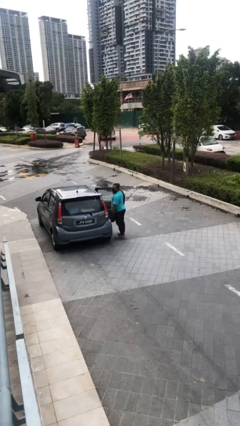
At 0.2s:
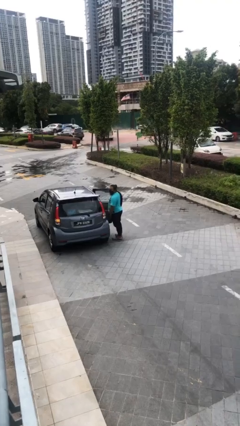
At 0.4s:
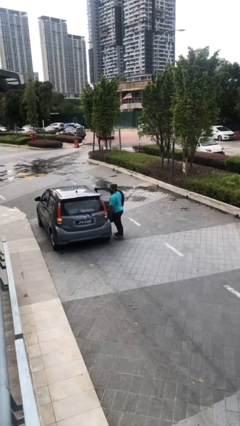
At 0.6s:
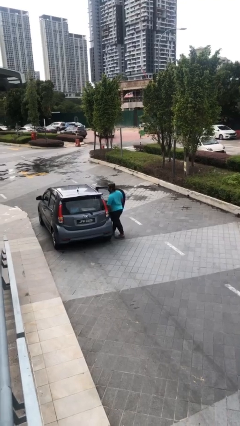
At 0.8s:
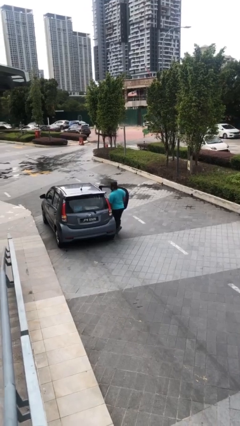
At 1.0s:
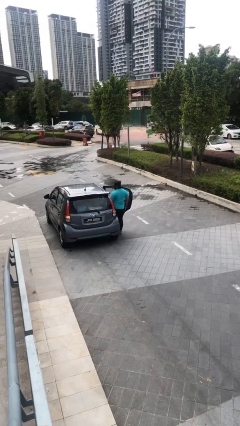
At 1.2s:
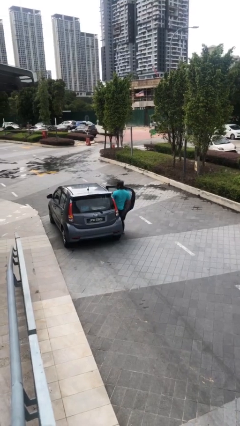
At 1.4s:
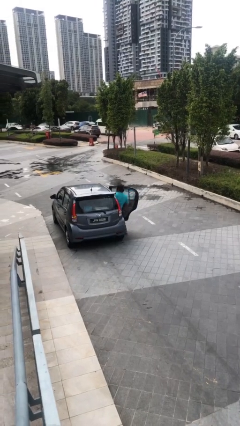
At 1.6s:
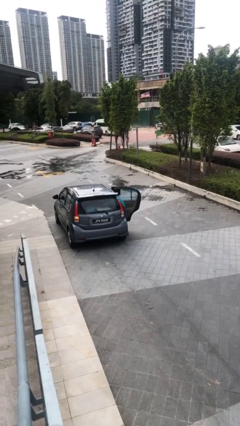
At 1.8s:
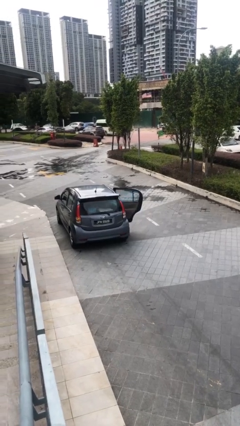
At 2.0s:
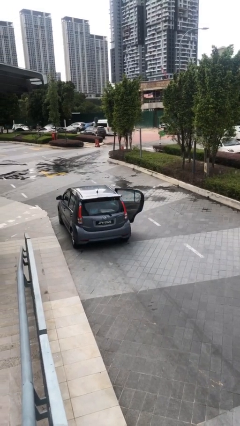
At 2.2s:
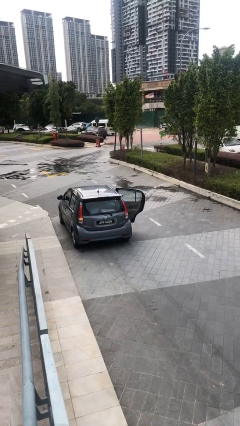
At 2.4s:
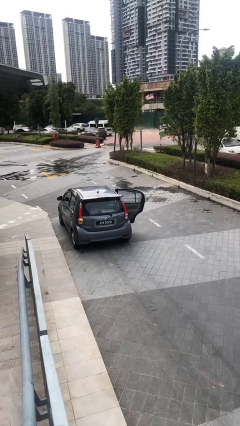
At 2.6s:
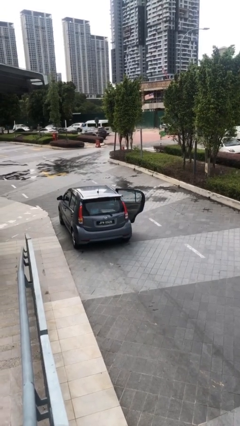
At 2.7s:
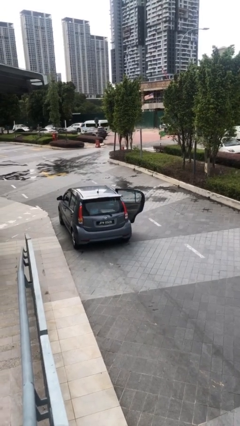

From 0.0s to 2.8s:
person enters car

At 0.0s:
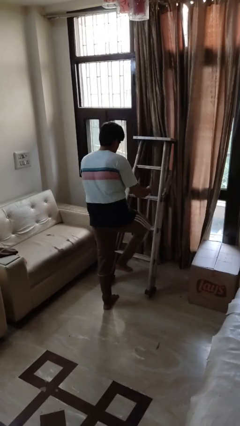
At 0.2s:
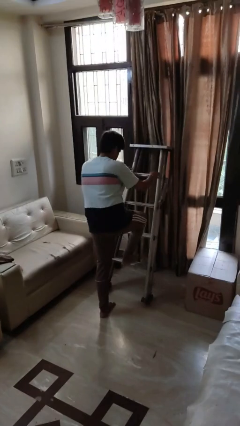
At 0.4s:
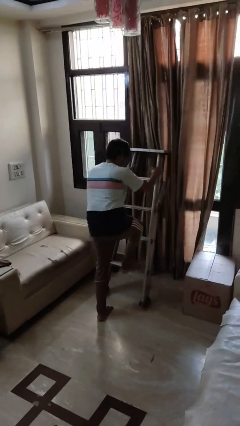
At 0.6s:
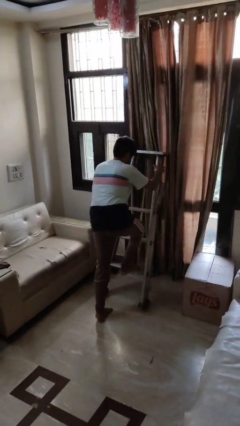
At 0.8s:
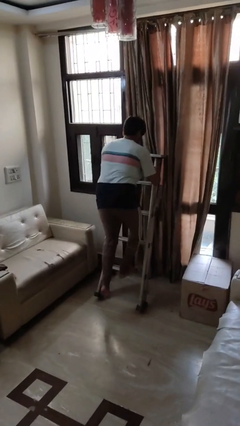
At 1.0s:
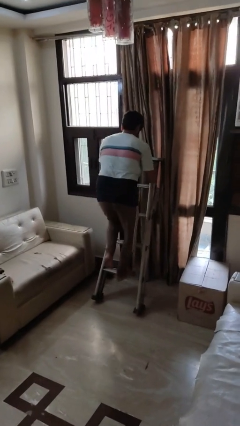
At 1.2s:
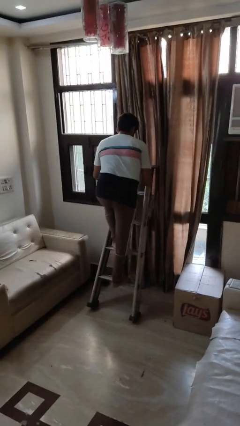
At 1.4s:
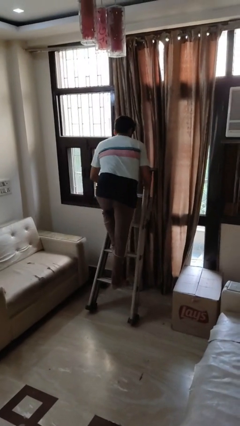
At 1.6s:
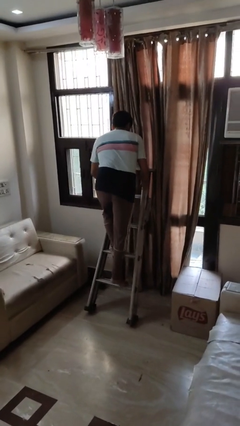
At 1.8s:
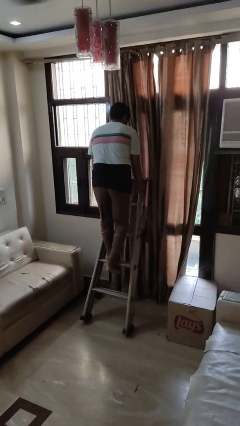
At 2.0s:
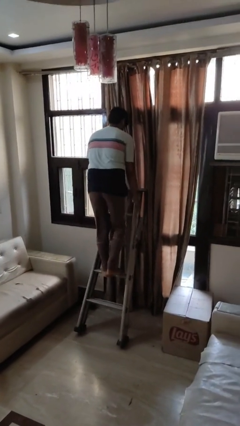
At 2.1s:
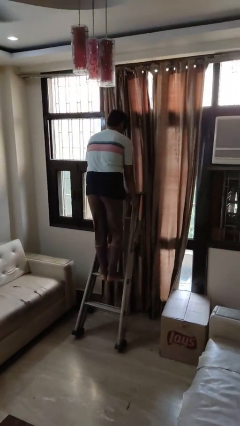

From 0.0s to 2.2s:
person climbs up ladder

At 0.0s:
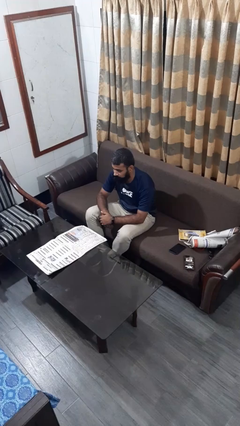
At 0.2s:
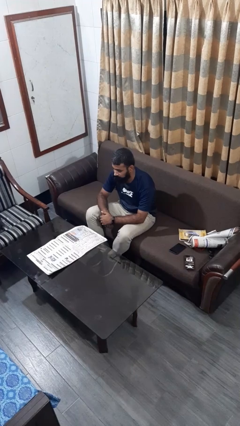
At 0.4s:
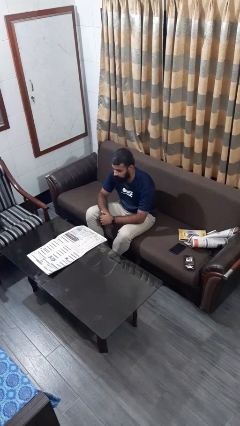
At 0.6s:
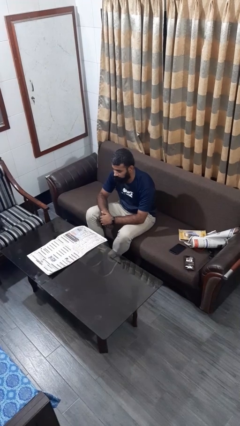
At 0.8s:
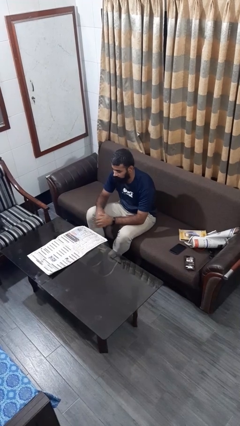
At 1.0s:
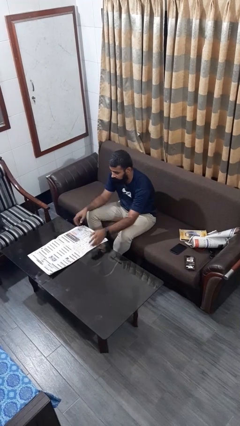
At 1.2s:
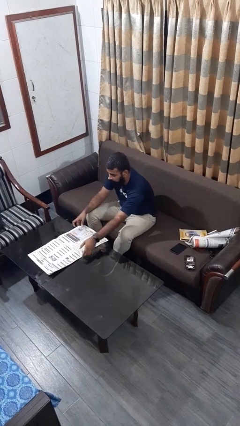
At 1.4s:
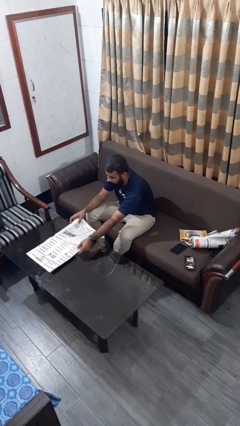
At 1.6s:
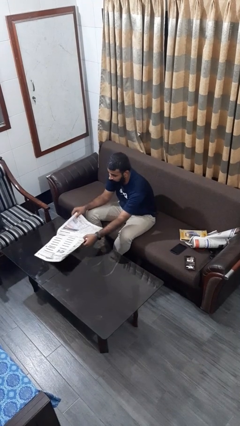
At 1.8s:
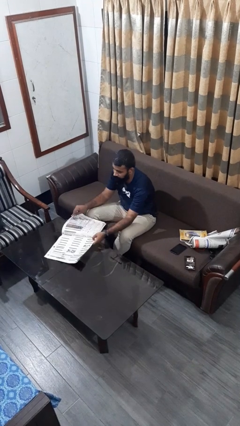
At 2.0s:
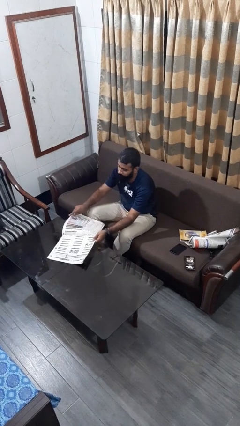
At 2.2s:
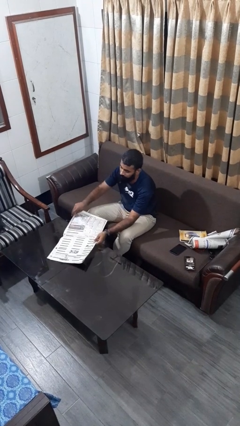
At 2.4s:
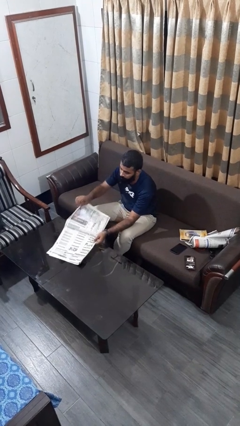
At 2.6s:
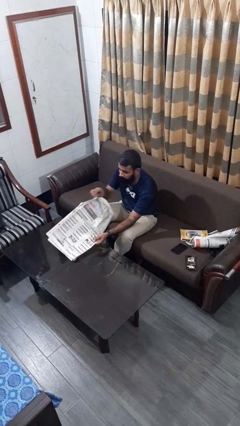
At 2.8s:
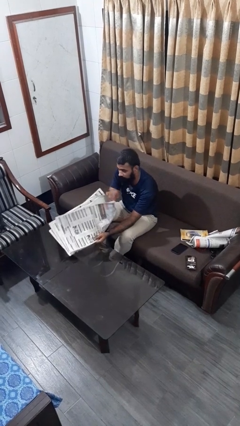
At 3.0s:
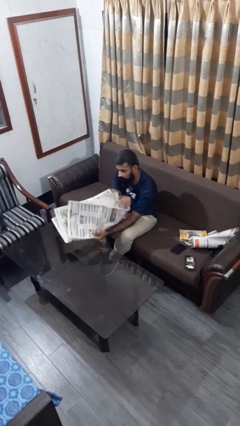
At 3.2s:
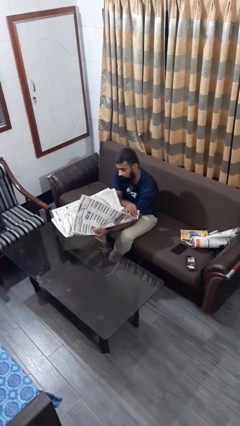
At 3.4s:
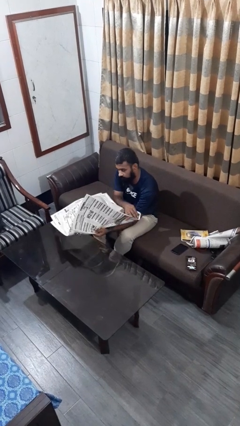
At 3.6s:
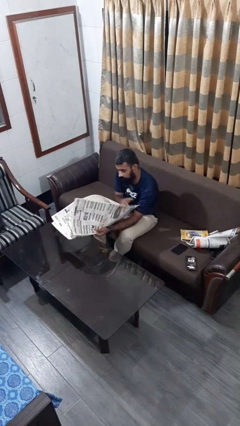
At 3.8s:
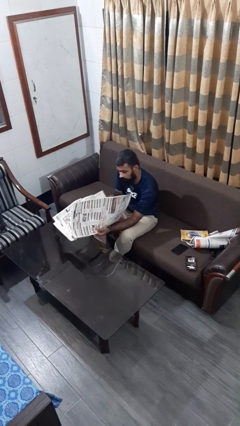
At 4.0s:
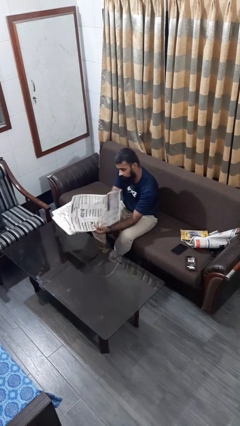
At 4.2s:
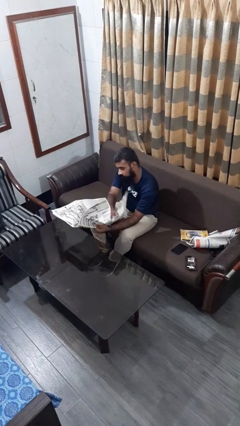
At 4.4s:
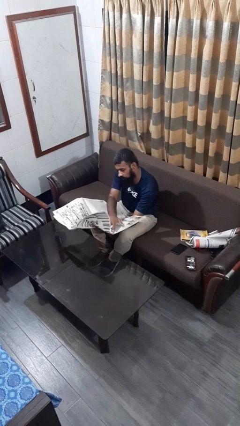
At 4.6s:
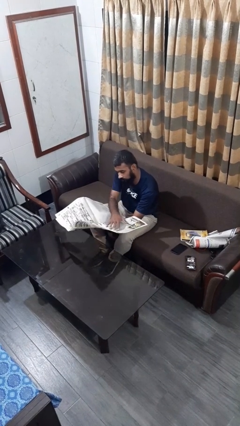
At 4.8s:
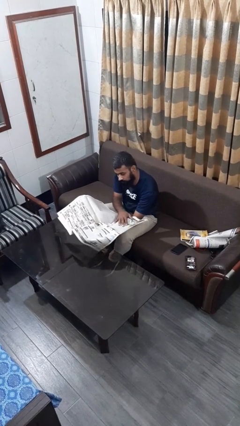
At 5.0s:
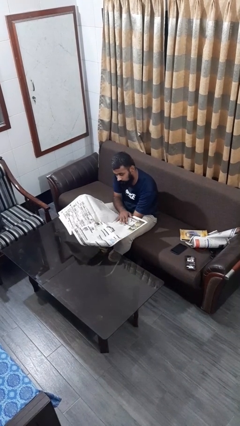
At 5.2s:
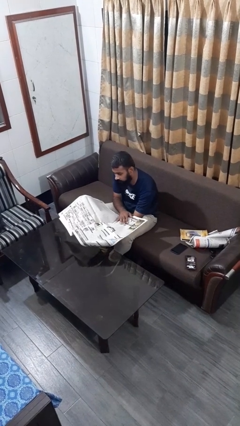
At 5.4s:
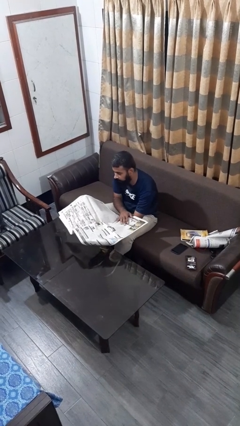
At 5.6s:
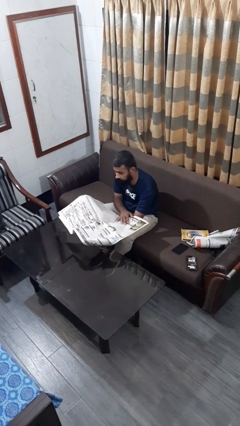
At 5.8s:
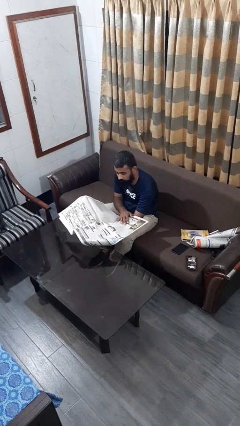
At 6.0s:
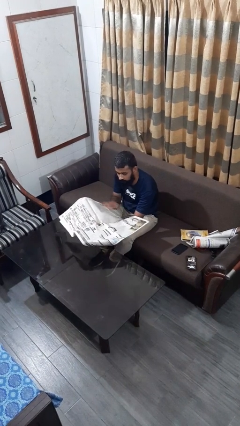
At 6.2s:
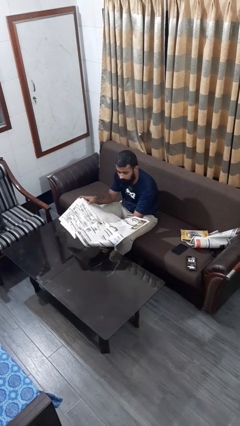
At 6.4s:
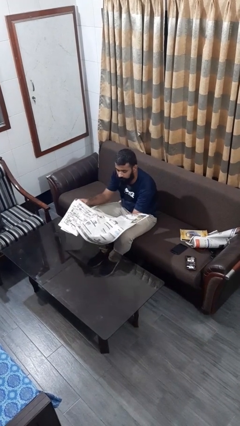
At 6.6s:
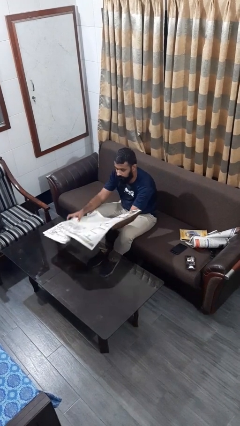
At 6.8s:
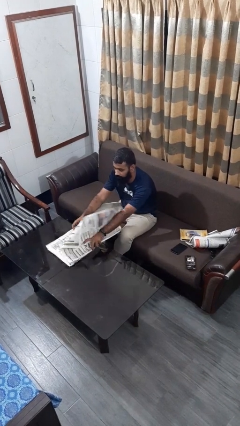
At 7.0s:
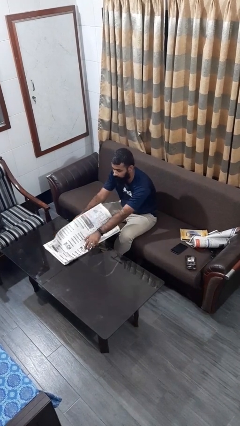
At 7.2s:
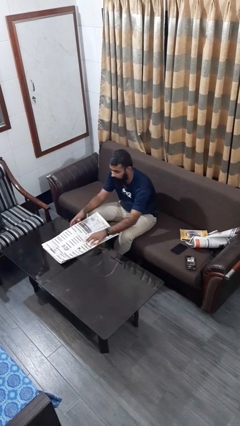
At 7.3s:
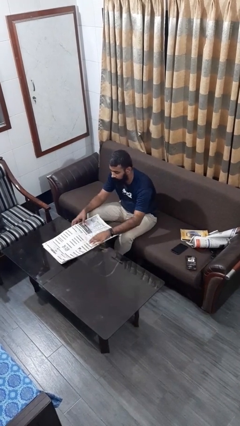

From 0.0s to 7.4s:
person reads newspaper

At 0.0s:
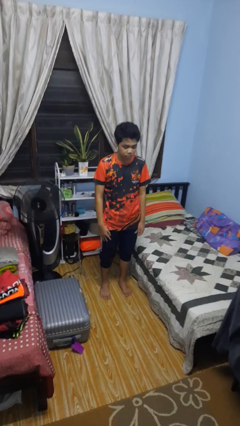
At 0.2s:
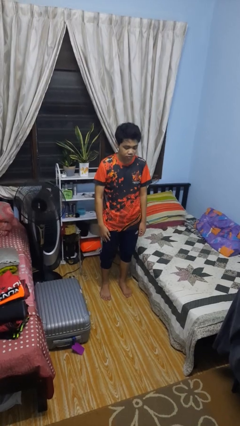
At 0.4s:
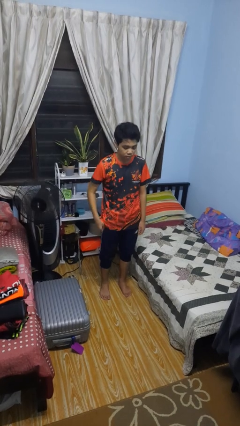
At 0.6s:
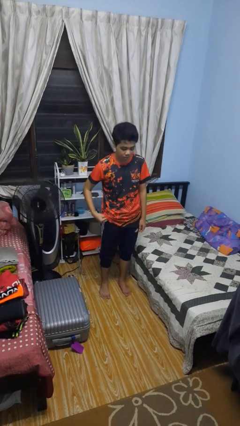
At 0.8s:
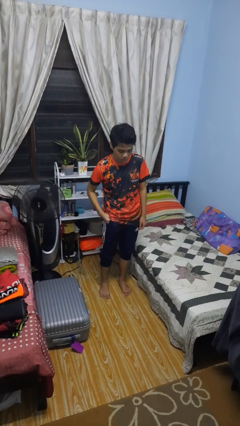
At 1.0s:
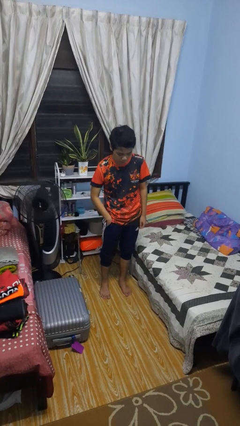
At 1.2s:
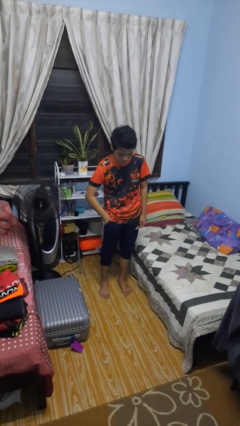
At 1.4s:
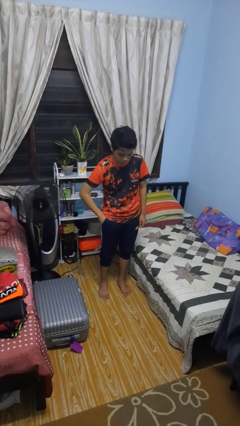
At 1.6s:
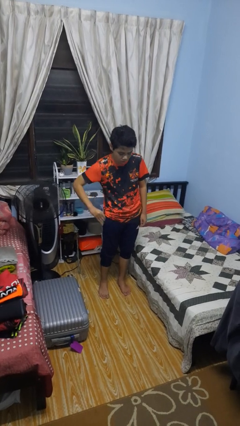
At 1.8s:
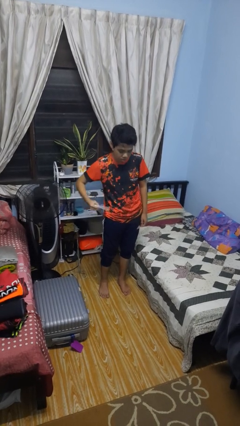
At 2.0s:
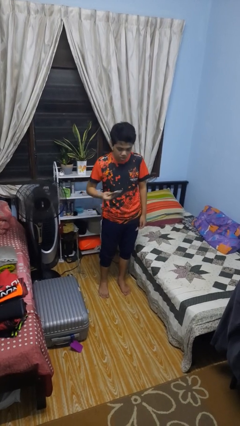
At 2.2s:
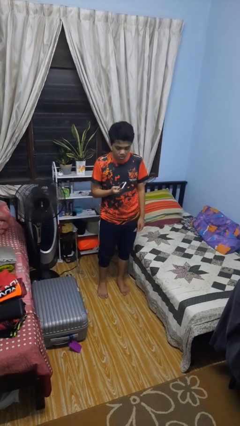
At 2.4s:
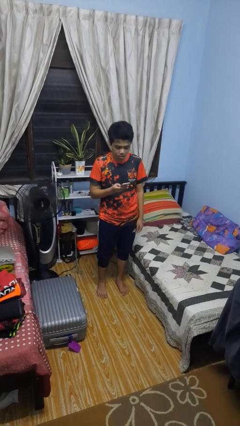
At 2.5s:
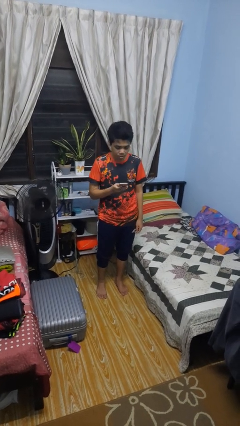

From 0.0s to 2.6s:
person takes phone from pocket

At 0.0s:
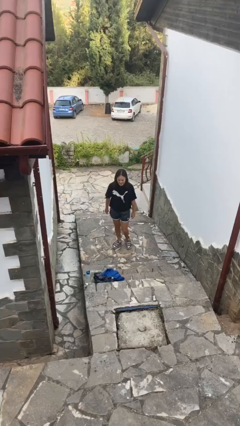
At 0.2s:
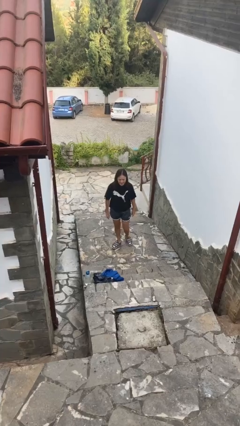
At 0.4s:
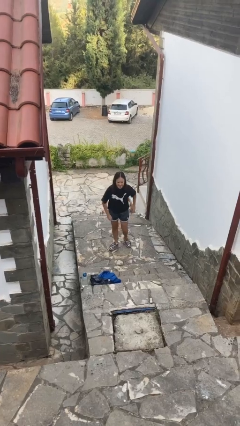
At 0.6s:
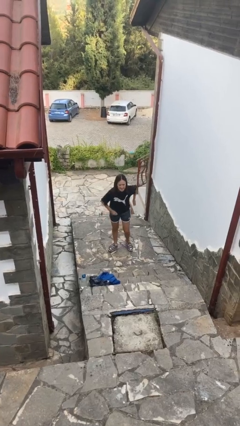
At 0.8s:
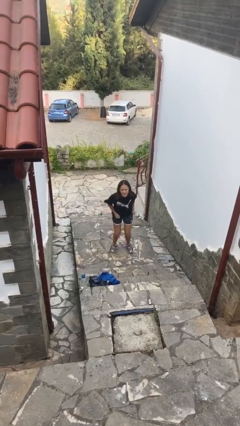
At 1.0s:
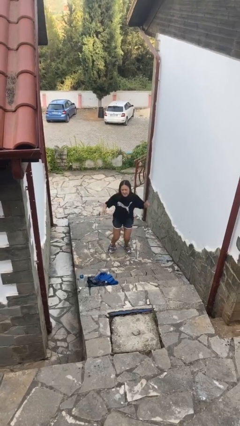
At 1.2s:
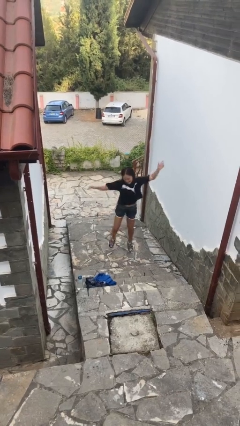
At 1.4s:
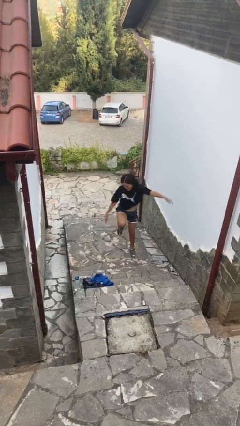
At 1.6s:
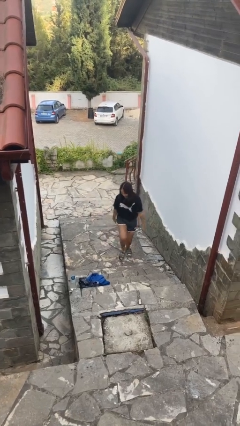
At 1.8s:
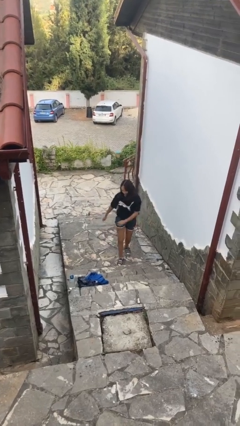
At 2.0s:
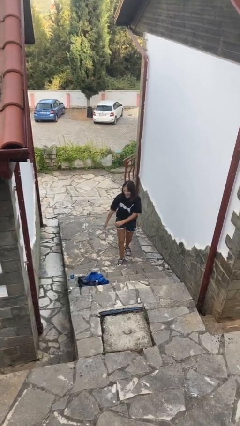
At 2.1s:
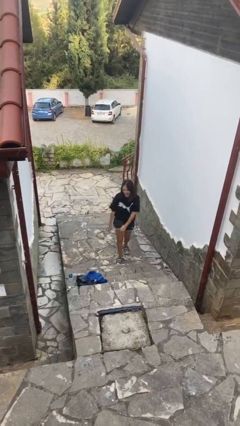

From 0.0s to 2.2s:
person jumps
